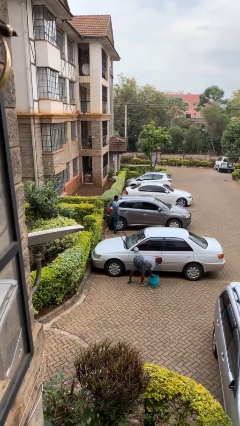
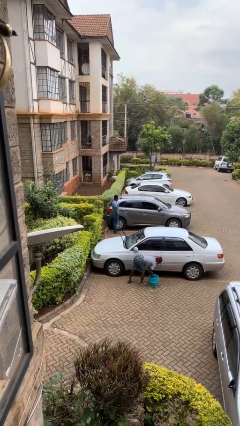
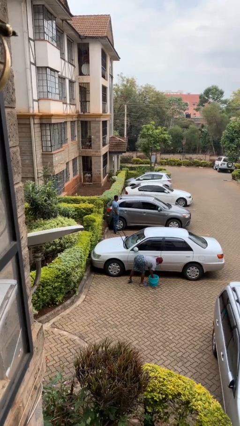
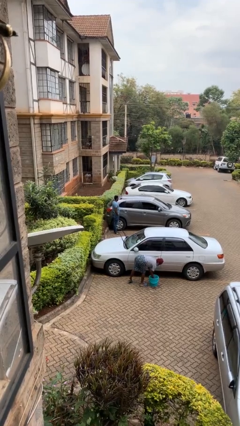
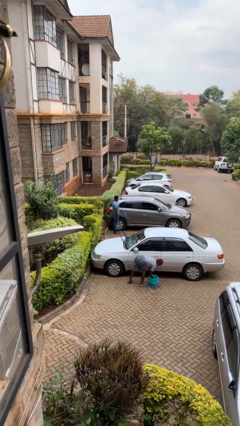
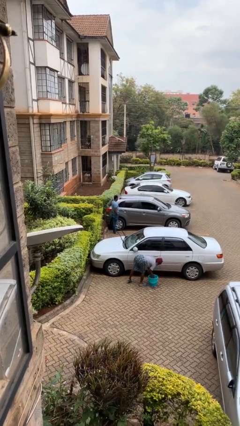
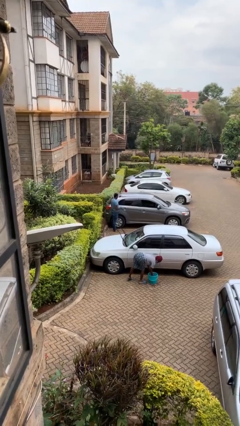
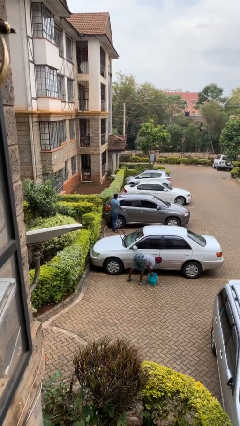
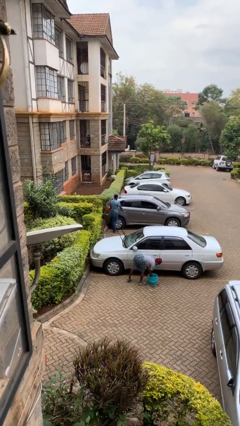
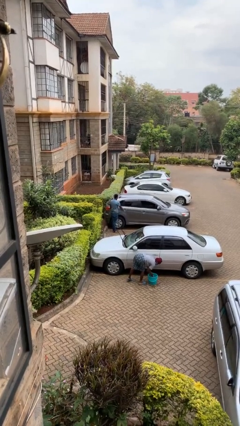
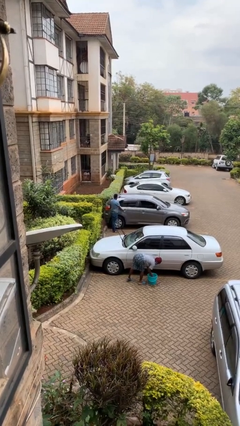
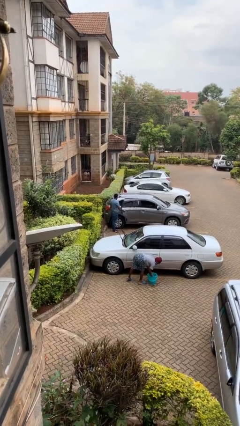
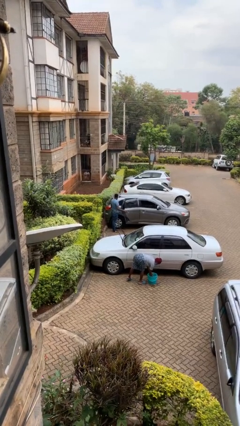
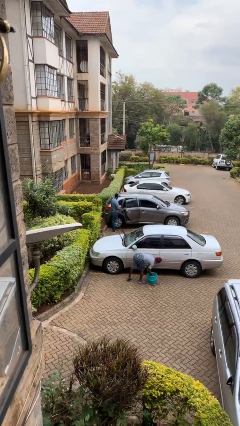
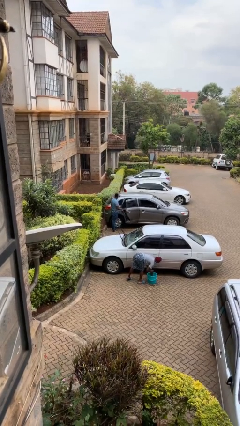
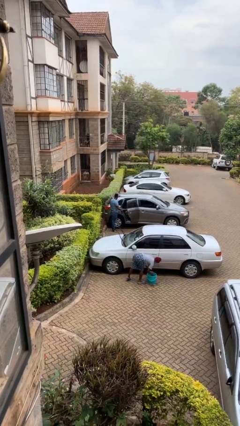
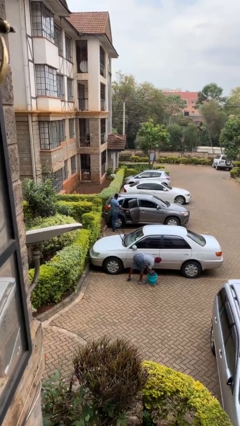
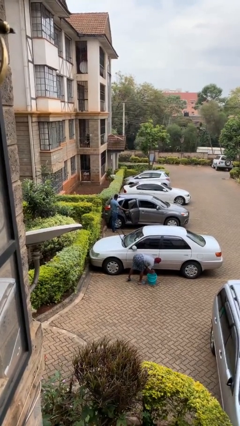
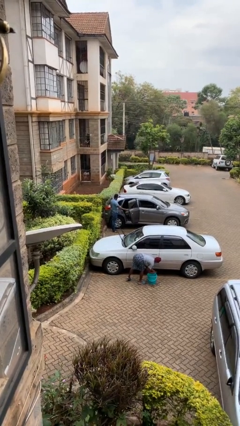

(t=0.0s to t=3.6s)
person opens car door

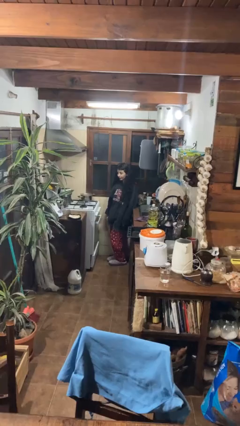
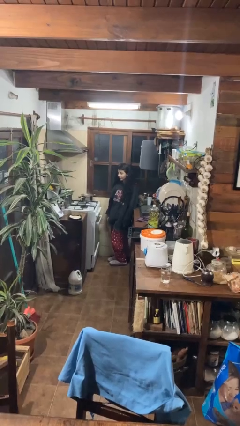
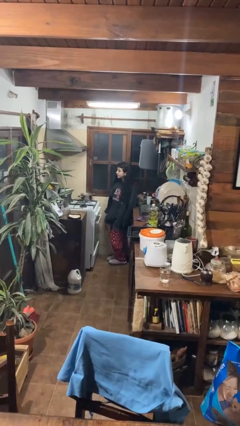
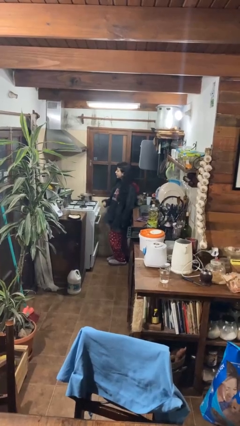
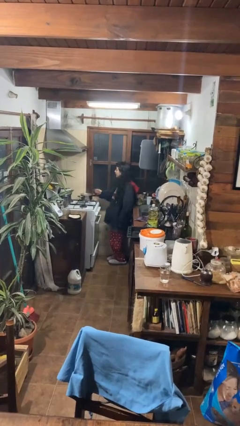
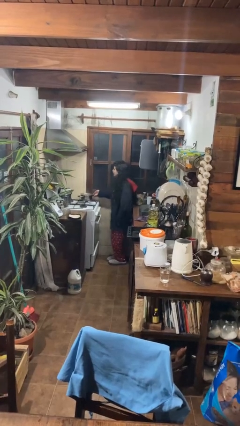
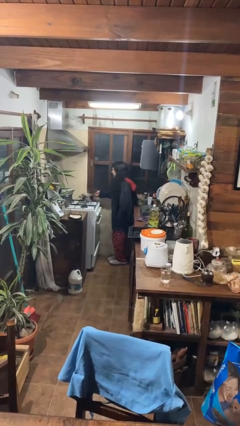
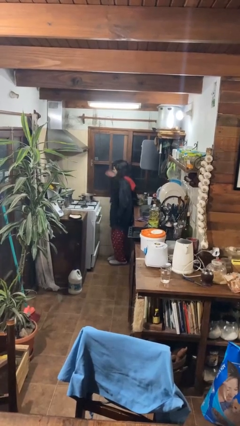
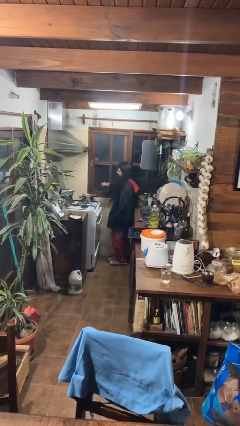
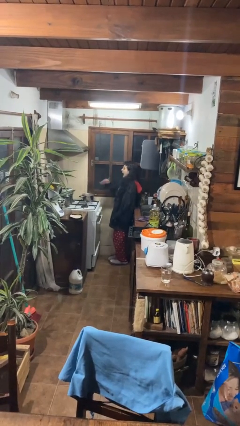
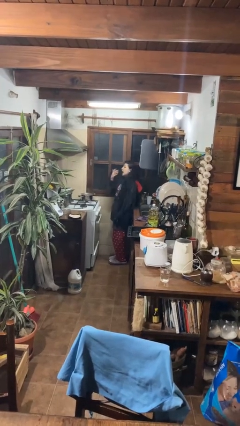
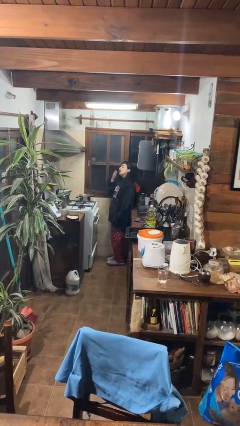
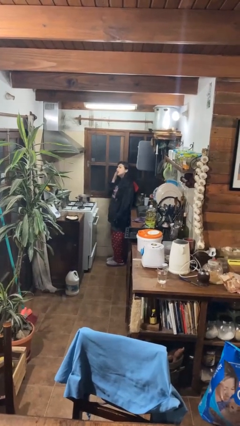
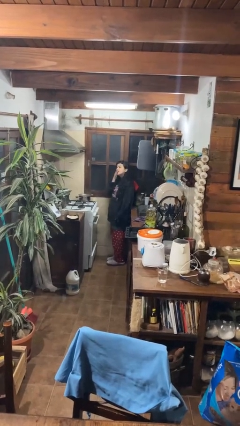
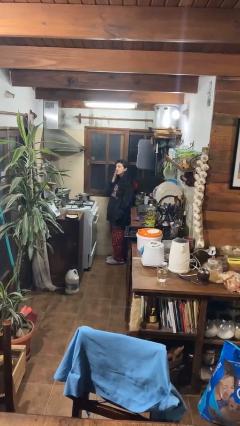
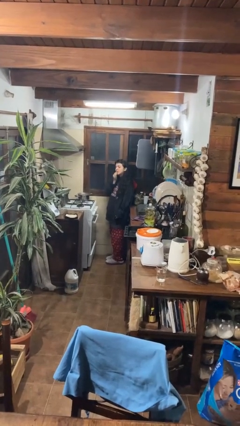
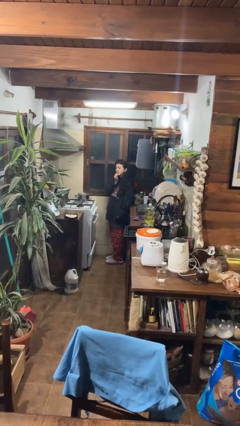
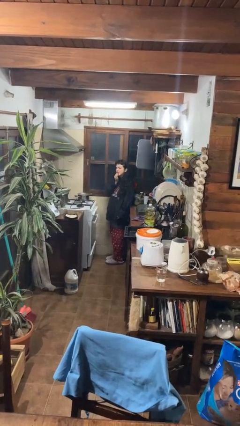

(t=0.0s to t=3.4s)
person burns hand

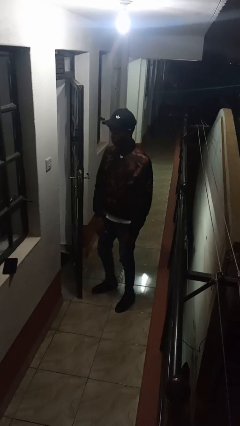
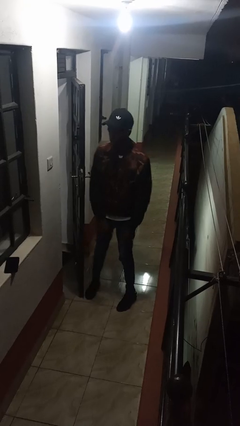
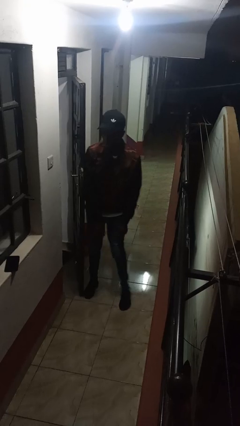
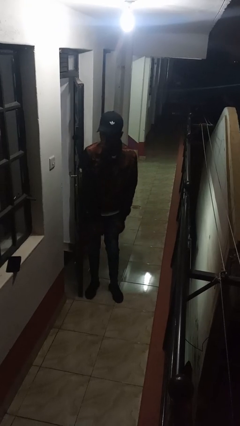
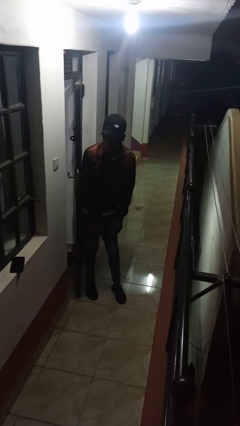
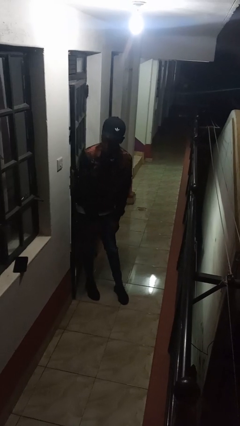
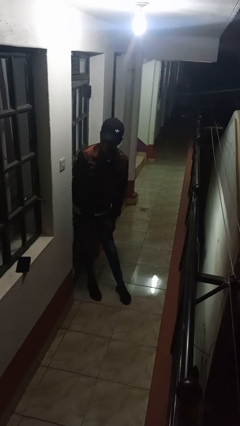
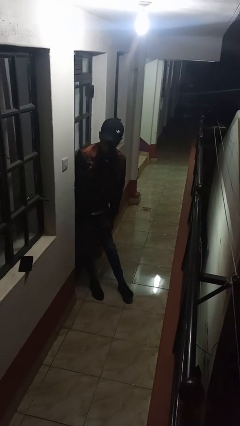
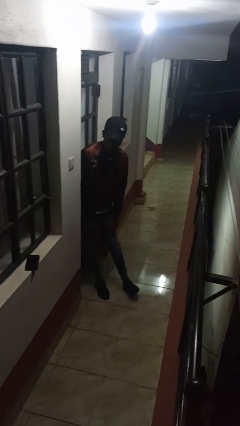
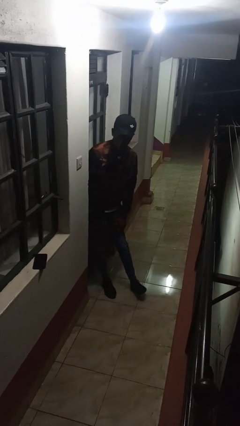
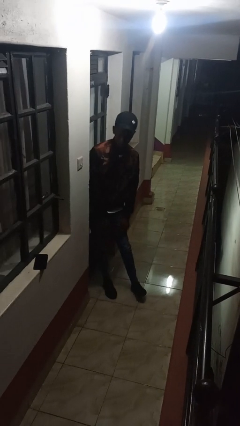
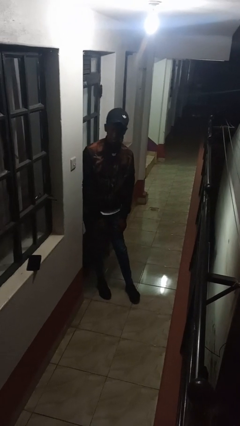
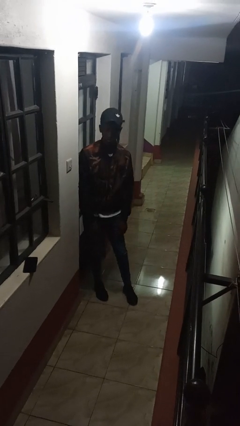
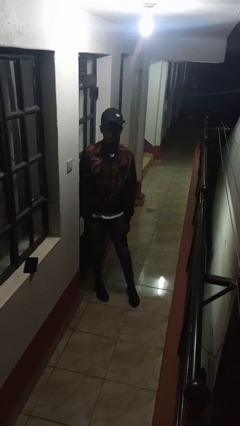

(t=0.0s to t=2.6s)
person closes door with hip

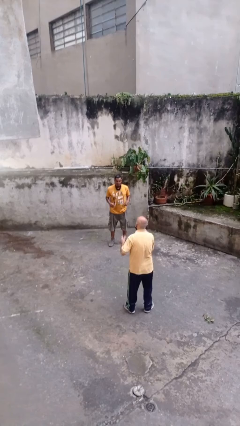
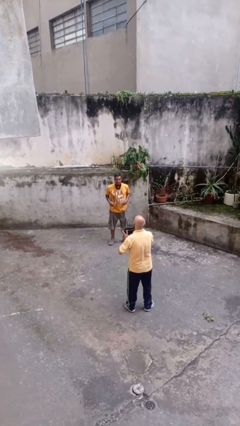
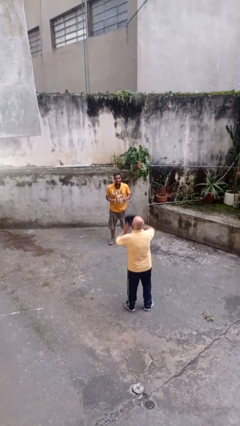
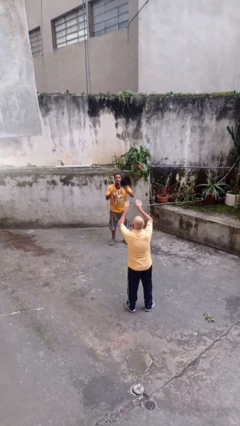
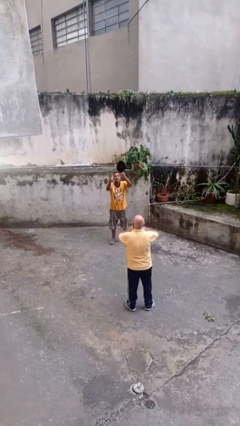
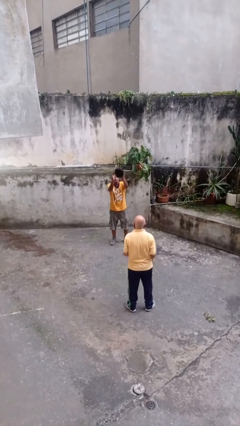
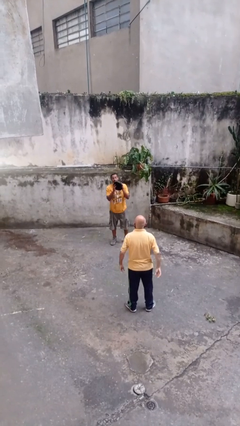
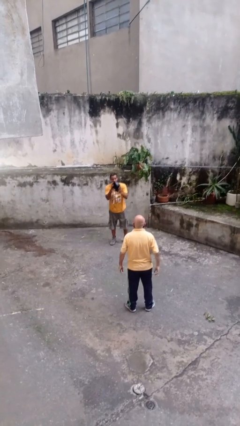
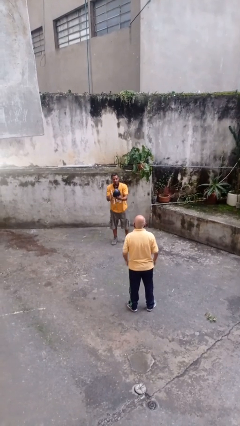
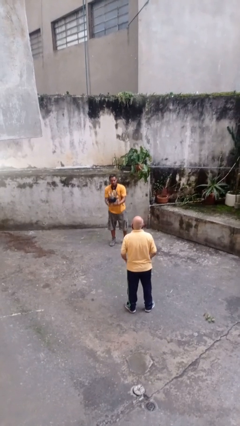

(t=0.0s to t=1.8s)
person catches object from person

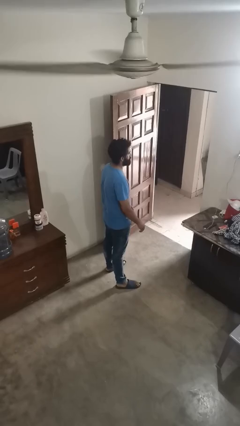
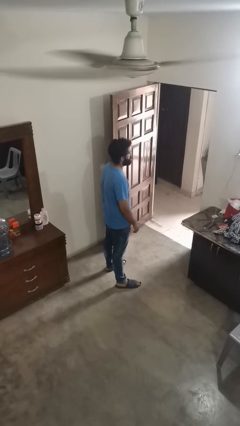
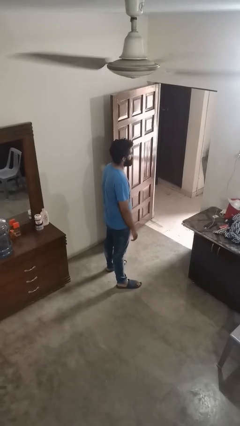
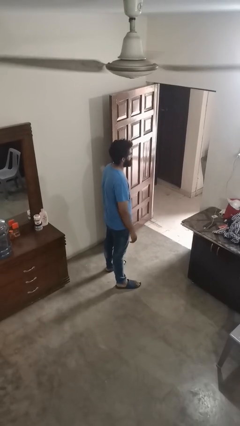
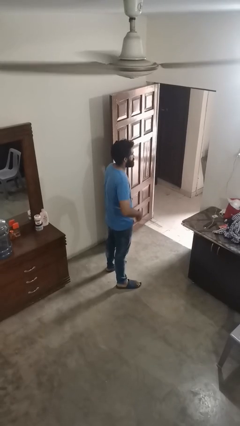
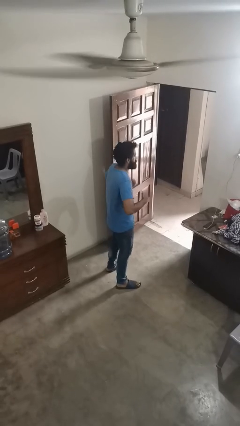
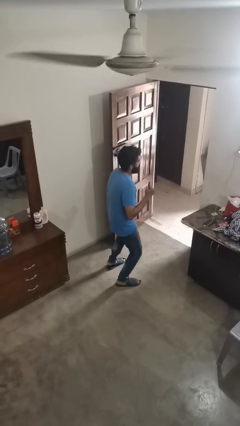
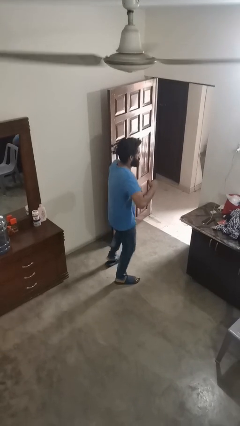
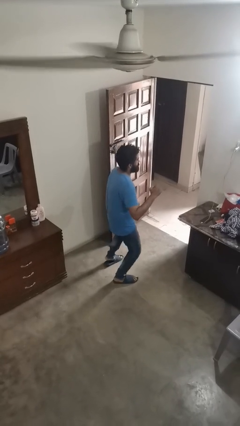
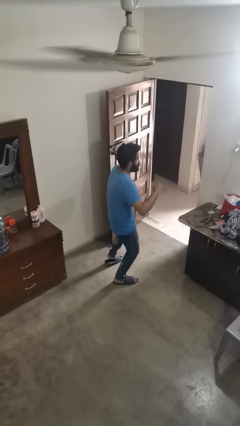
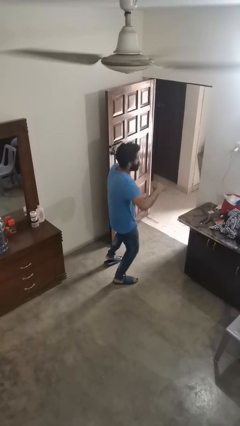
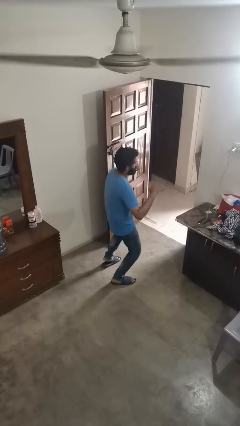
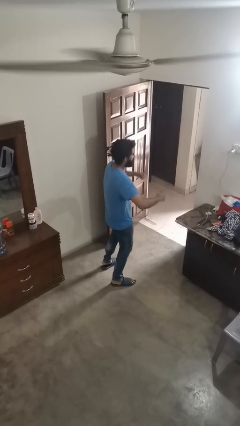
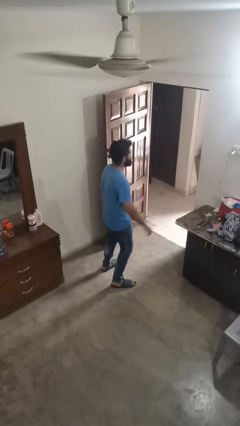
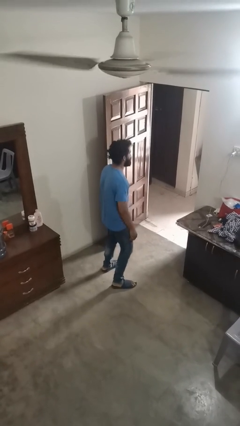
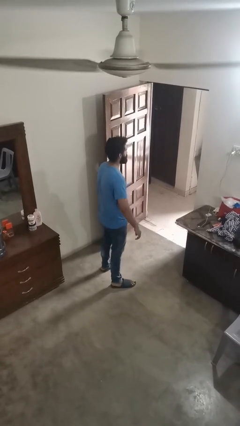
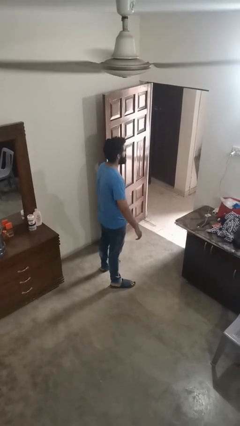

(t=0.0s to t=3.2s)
person dances in place

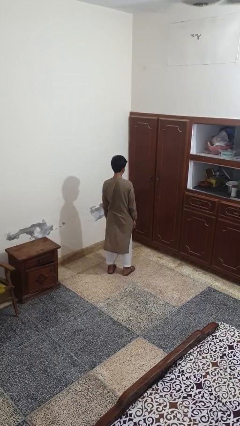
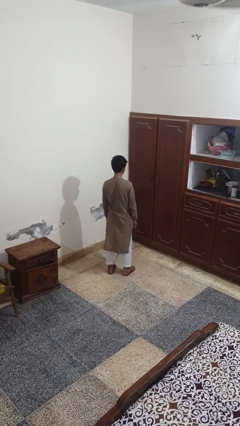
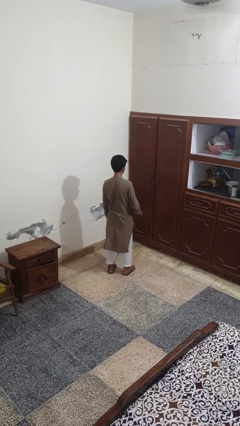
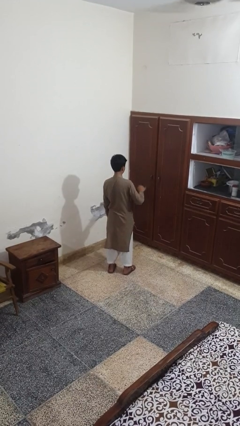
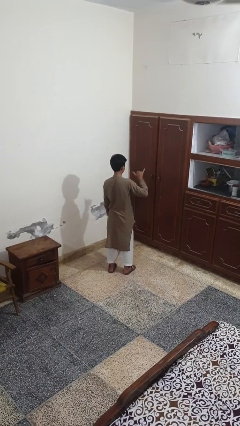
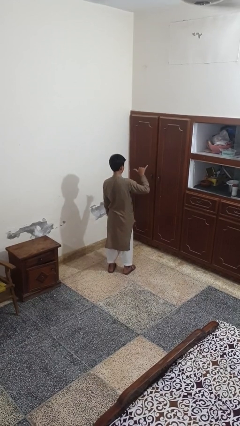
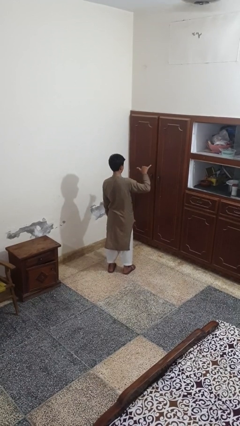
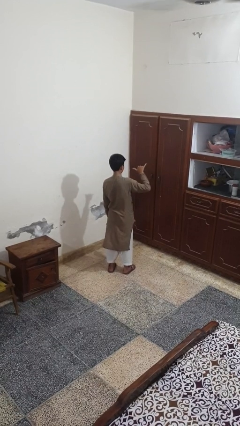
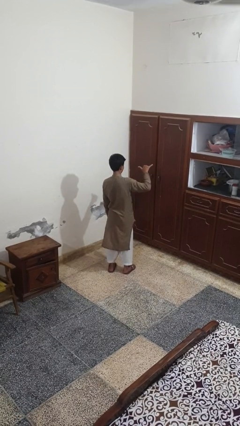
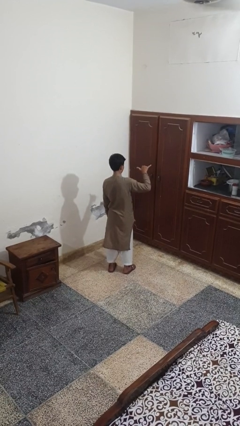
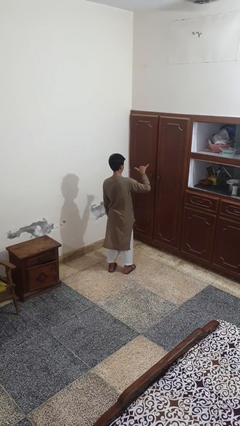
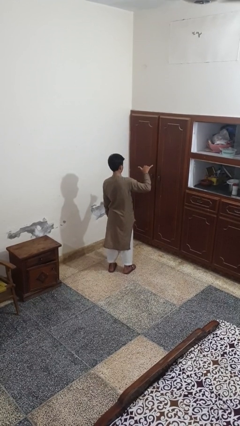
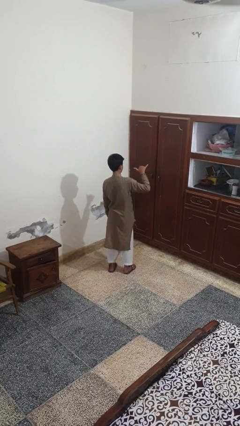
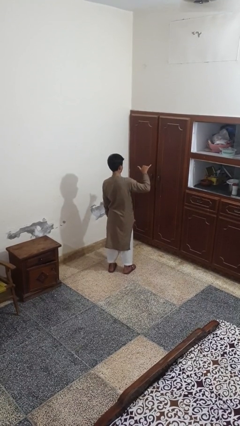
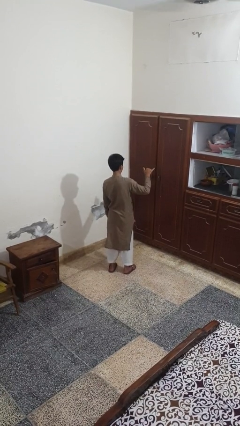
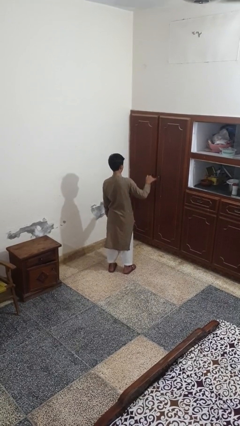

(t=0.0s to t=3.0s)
person gestures hang loose
